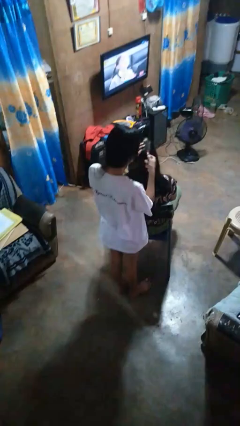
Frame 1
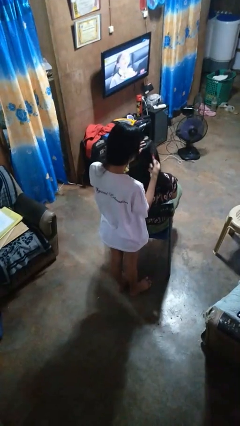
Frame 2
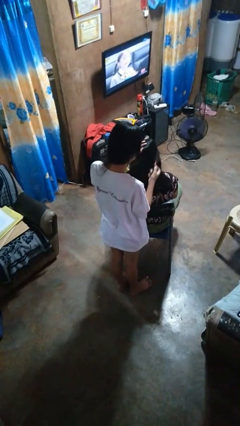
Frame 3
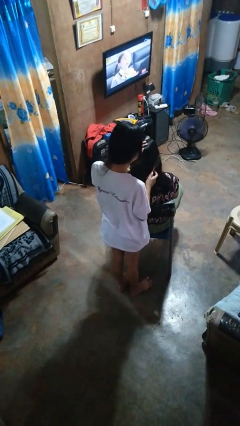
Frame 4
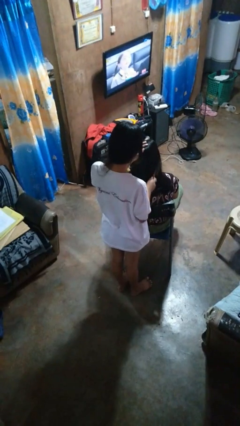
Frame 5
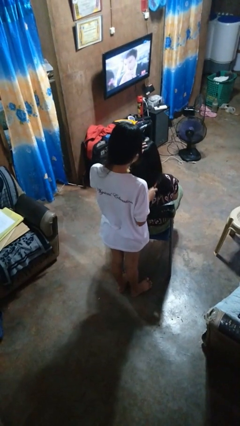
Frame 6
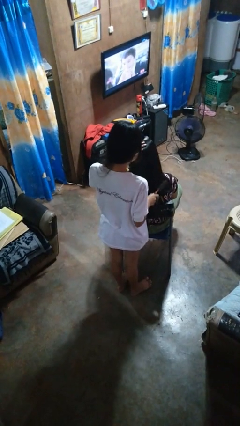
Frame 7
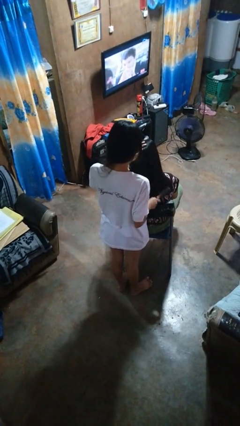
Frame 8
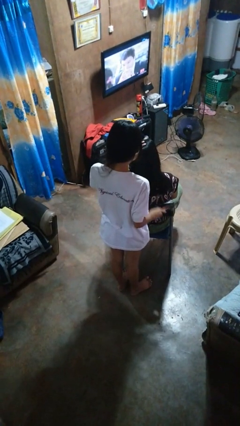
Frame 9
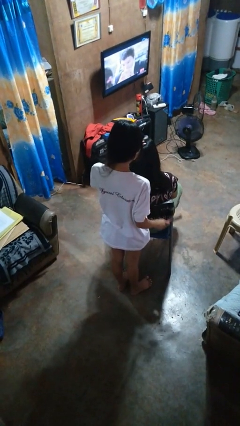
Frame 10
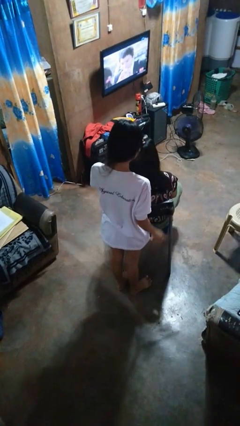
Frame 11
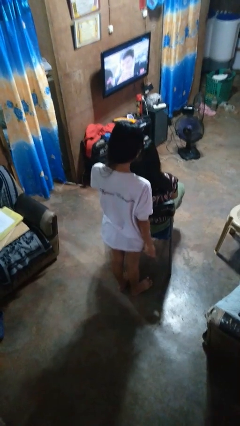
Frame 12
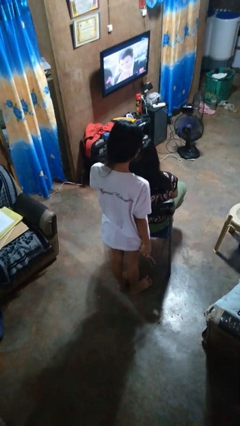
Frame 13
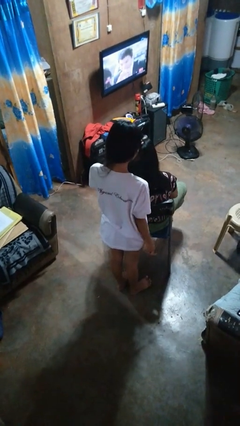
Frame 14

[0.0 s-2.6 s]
person brushes hair of person

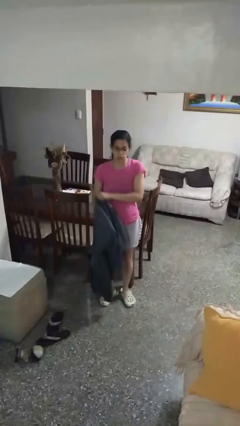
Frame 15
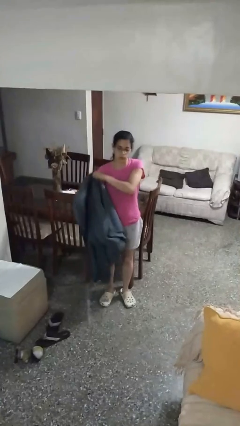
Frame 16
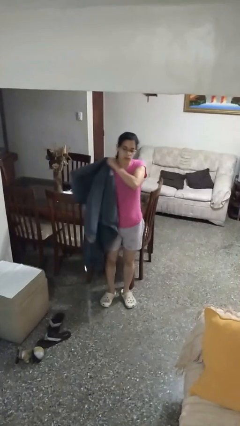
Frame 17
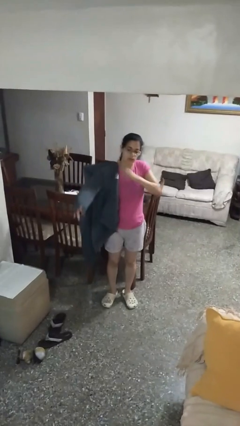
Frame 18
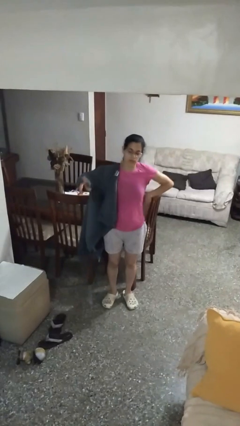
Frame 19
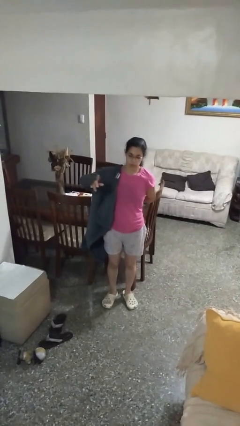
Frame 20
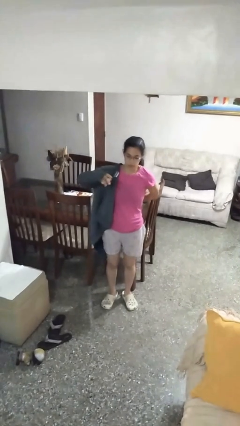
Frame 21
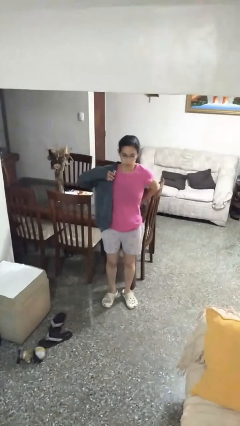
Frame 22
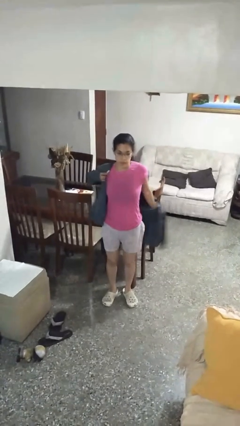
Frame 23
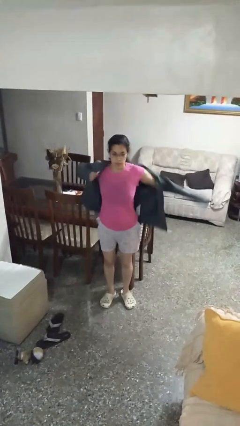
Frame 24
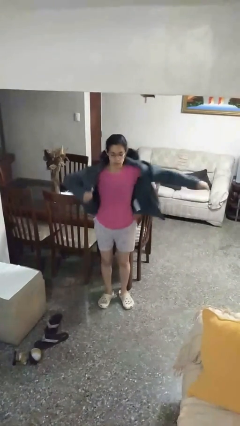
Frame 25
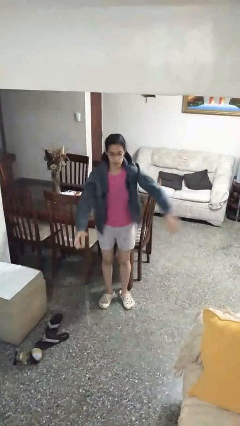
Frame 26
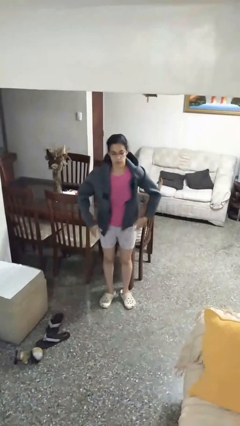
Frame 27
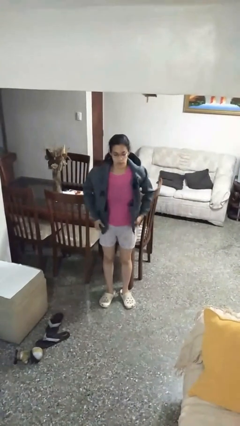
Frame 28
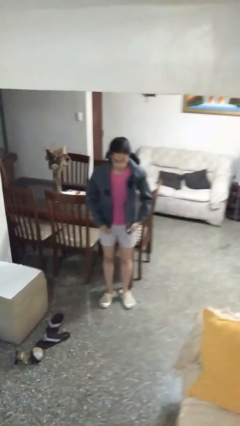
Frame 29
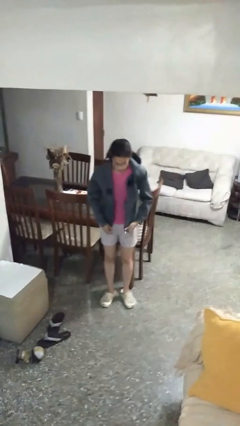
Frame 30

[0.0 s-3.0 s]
person puts on jacket

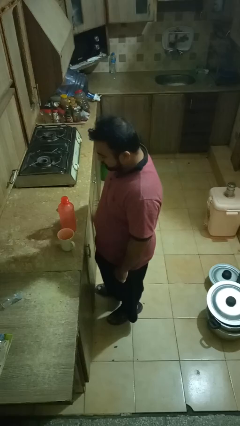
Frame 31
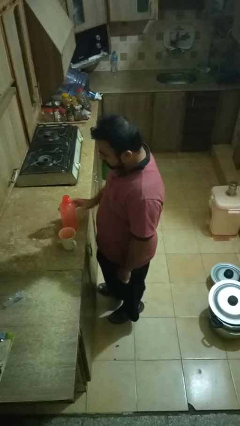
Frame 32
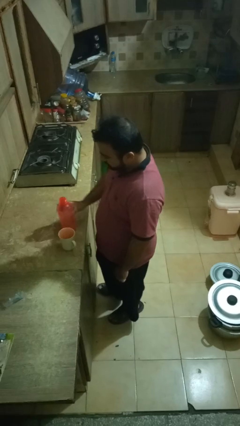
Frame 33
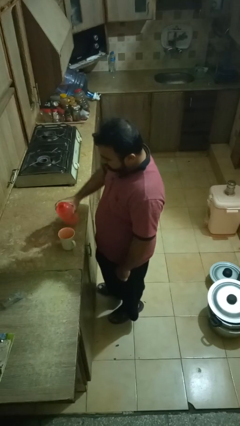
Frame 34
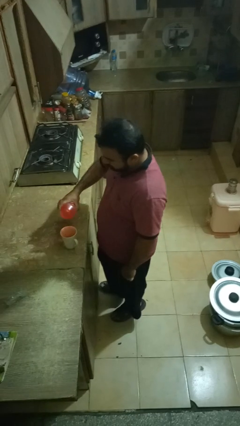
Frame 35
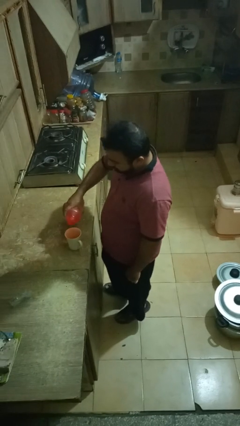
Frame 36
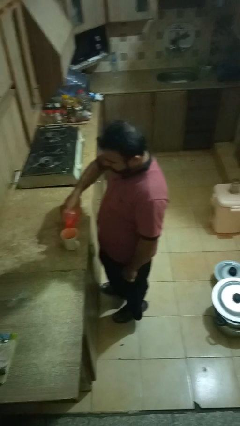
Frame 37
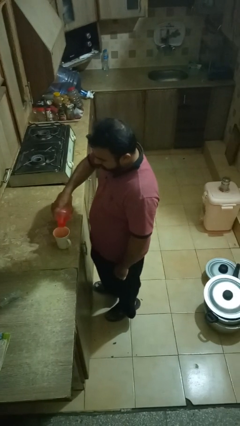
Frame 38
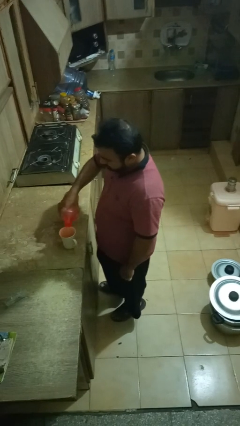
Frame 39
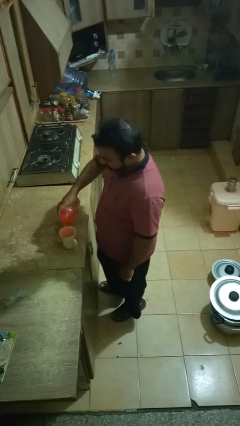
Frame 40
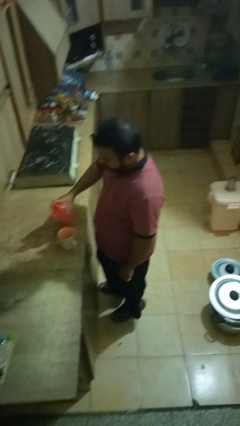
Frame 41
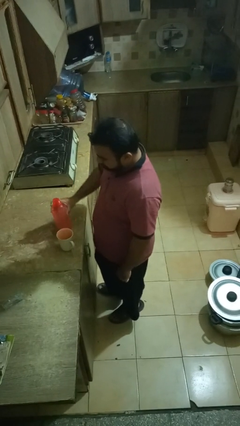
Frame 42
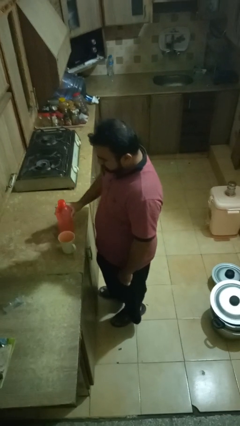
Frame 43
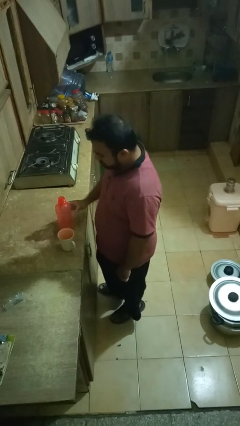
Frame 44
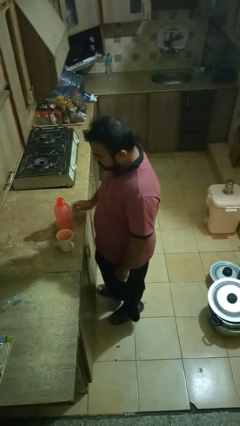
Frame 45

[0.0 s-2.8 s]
person pours liquid into cup

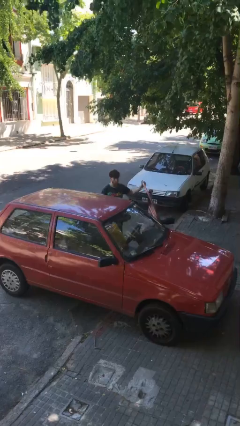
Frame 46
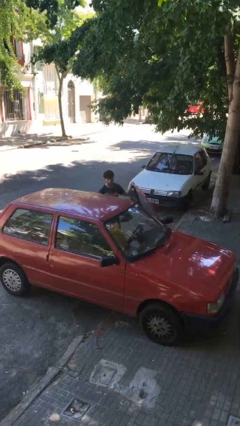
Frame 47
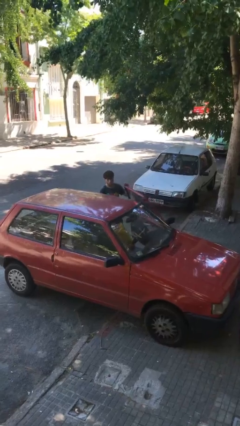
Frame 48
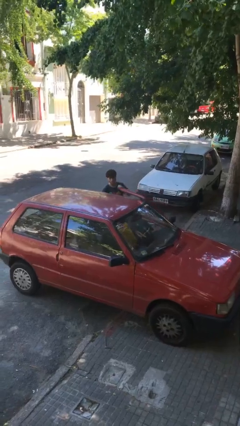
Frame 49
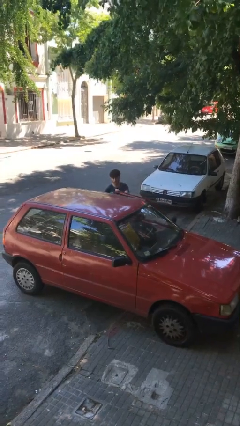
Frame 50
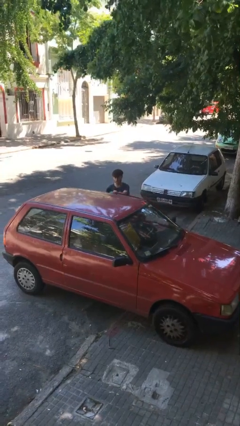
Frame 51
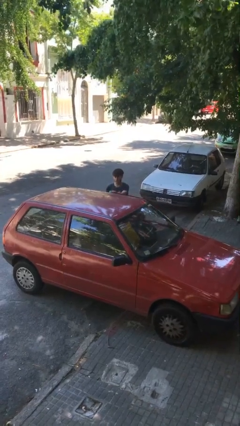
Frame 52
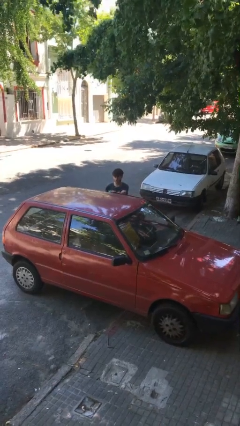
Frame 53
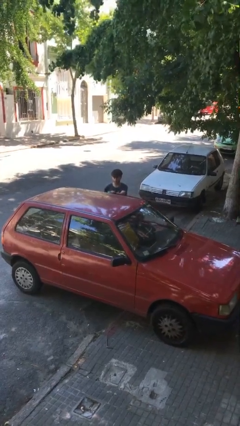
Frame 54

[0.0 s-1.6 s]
person closes car door

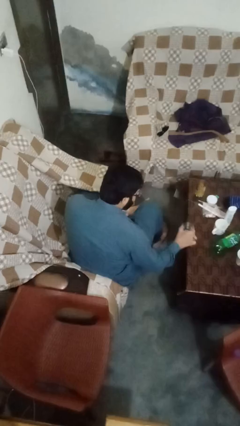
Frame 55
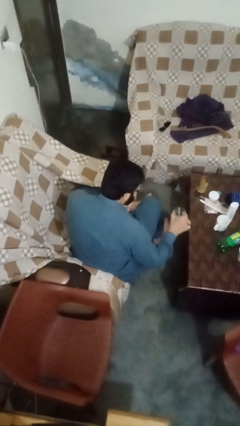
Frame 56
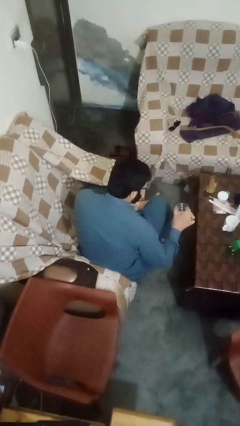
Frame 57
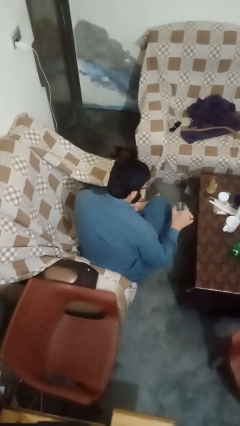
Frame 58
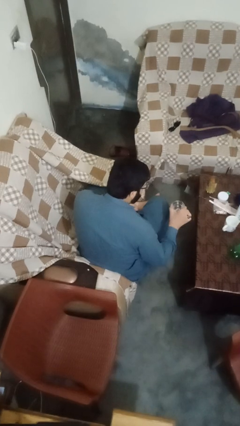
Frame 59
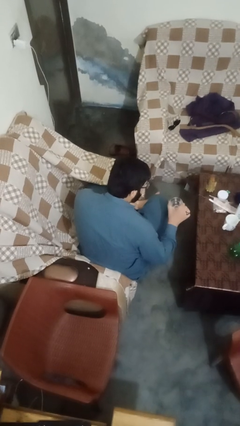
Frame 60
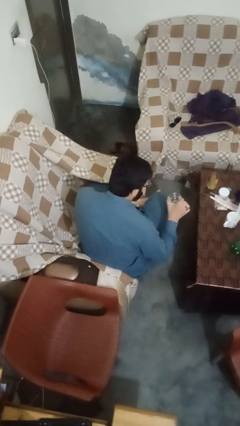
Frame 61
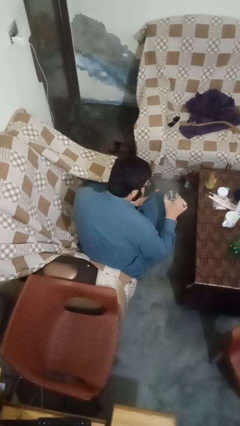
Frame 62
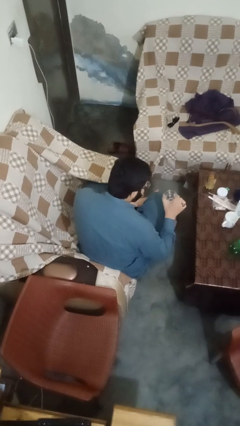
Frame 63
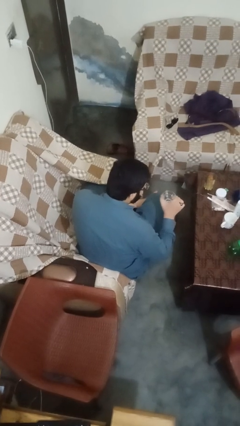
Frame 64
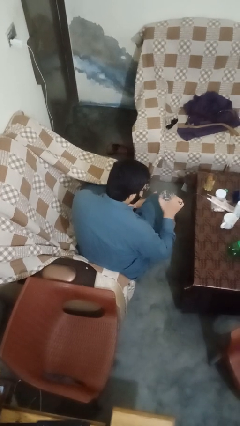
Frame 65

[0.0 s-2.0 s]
person picks up object from table

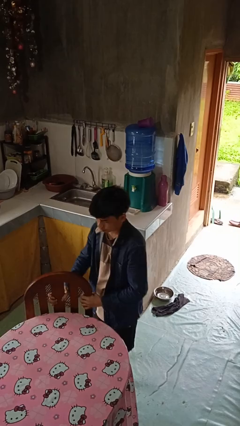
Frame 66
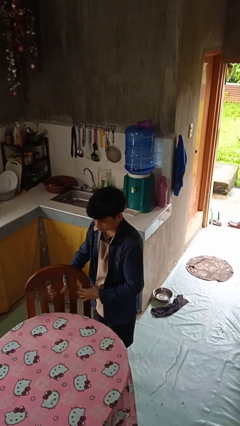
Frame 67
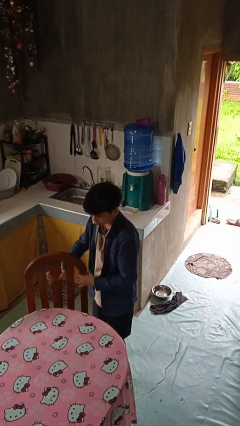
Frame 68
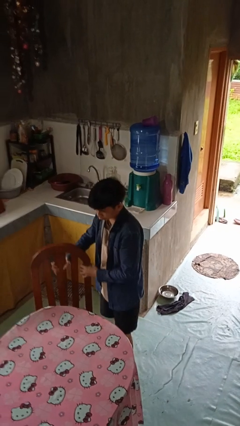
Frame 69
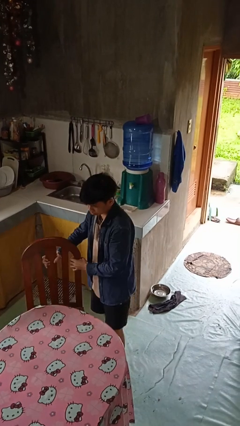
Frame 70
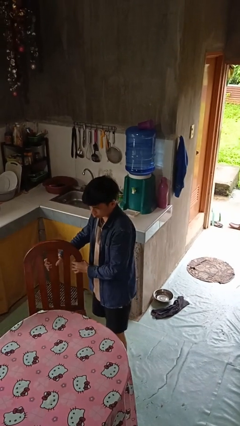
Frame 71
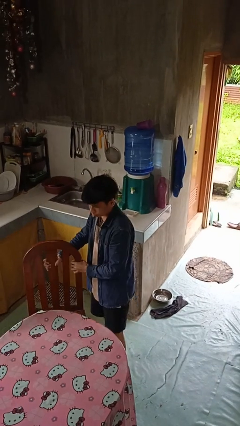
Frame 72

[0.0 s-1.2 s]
person pulls out chair

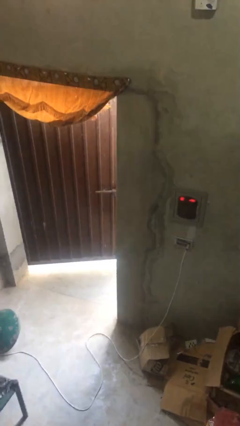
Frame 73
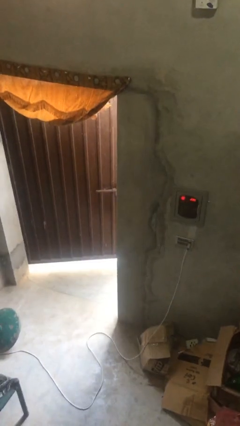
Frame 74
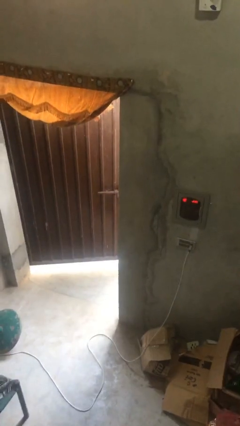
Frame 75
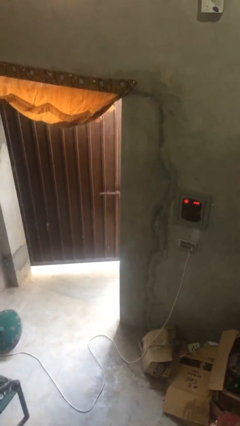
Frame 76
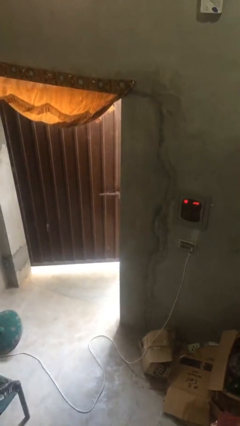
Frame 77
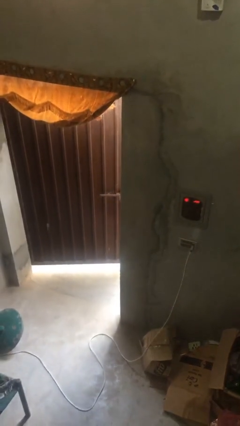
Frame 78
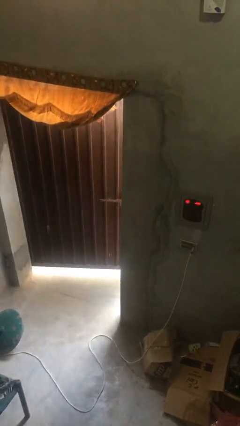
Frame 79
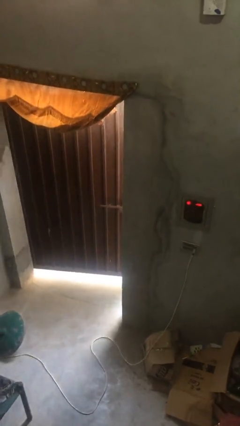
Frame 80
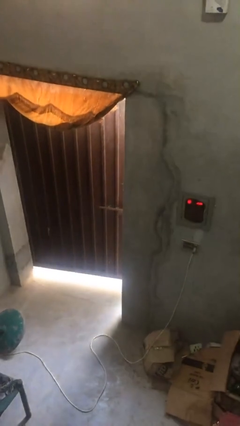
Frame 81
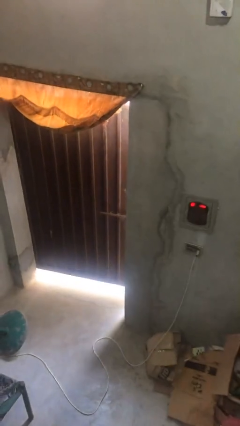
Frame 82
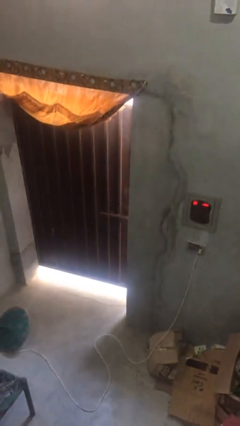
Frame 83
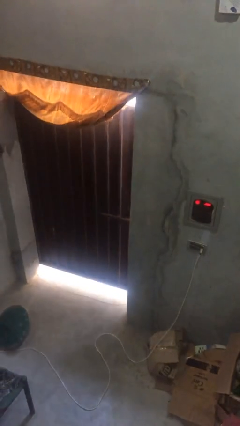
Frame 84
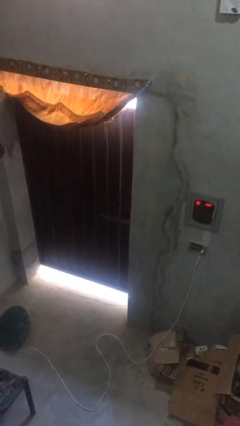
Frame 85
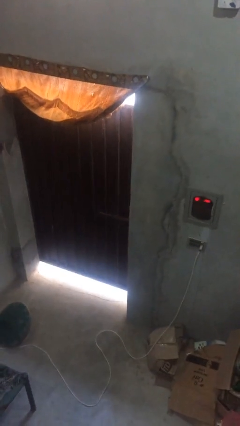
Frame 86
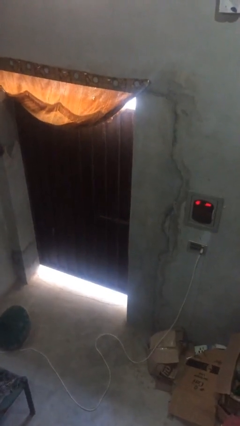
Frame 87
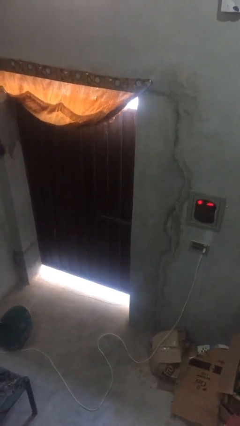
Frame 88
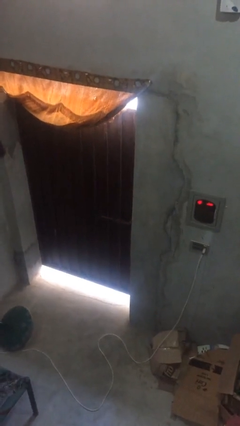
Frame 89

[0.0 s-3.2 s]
person closes facility door
